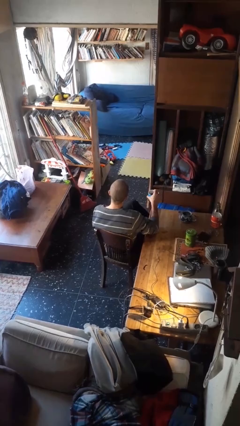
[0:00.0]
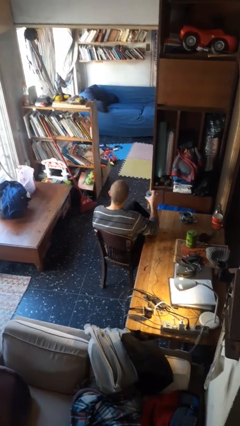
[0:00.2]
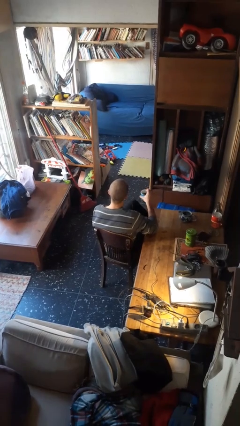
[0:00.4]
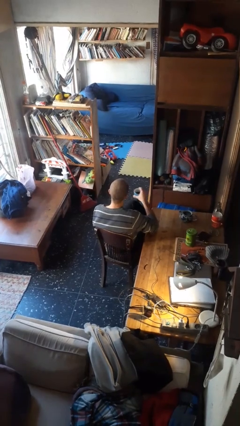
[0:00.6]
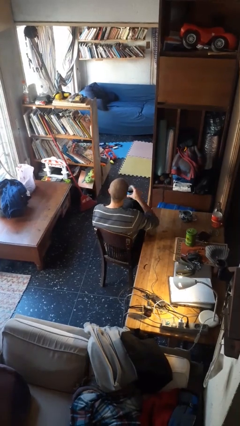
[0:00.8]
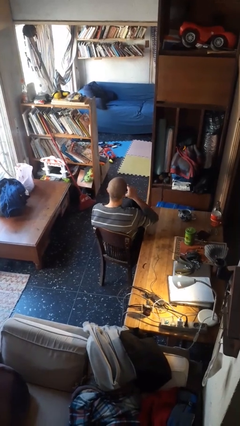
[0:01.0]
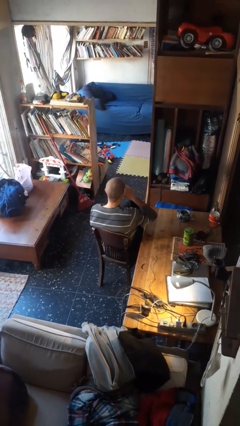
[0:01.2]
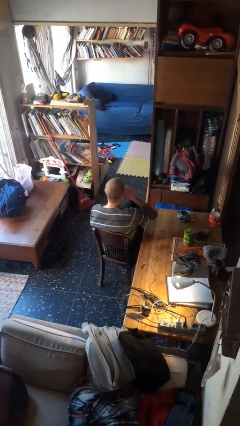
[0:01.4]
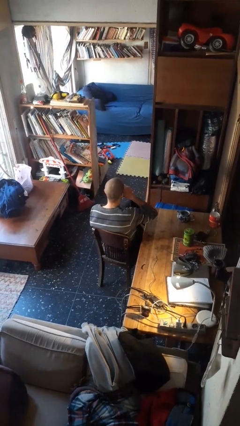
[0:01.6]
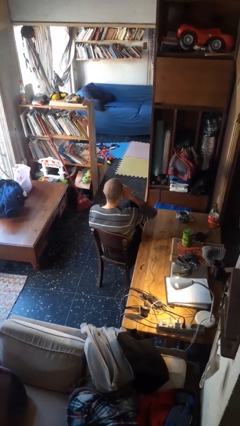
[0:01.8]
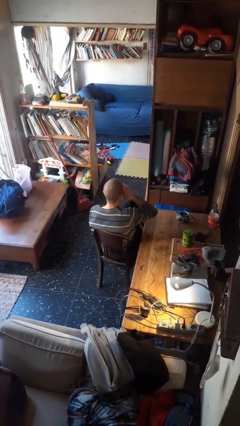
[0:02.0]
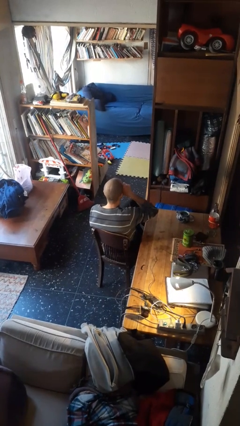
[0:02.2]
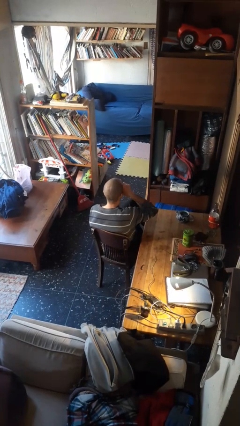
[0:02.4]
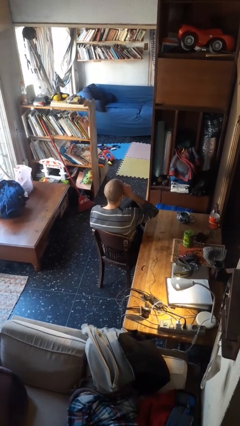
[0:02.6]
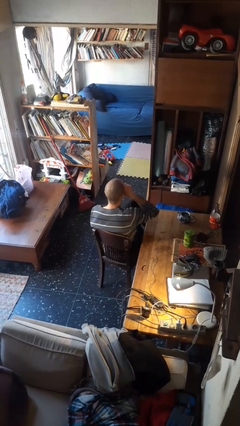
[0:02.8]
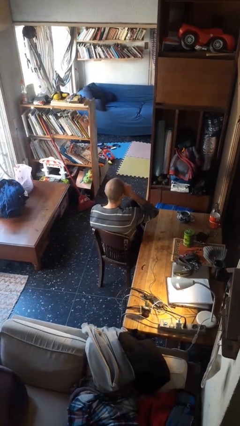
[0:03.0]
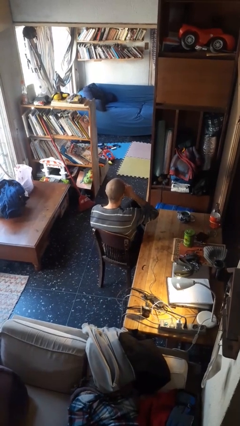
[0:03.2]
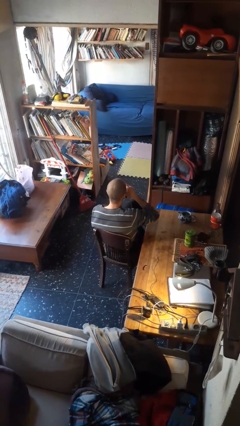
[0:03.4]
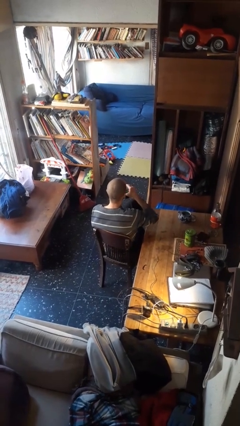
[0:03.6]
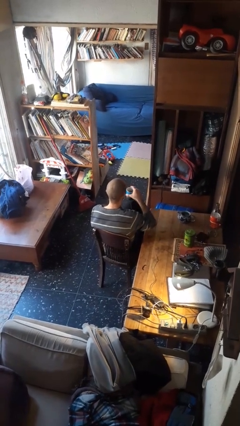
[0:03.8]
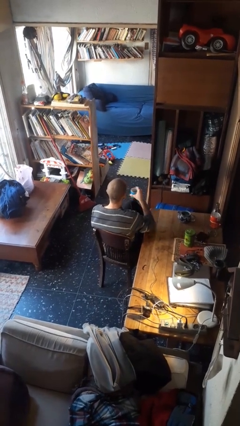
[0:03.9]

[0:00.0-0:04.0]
person drinks from mug

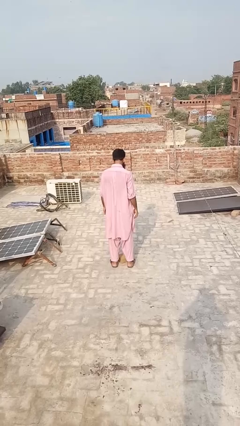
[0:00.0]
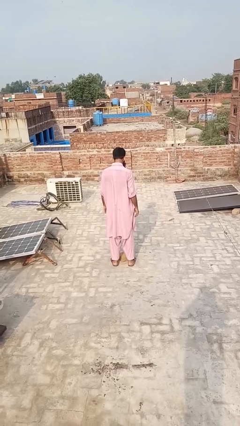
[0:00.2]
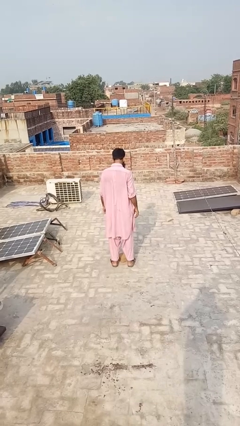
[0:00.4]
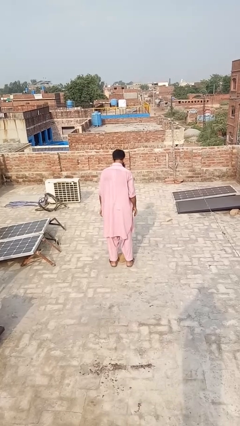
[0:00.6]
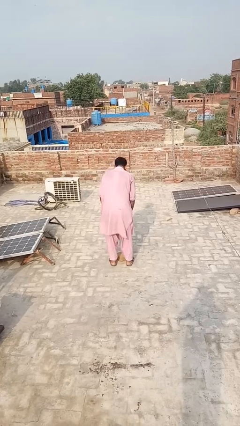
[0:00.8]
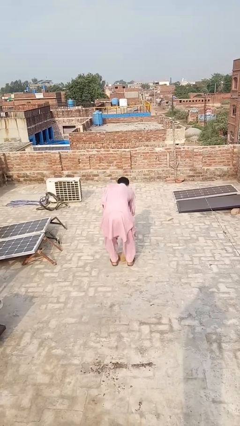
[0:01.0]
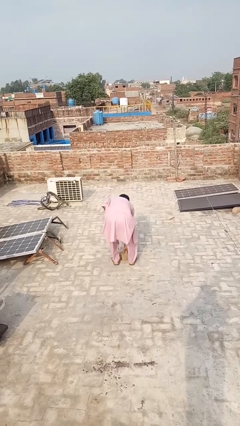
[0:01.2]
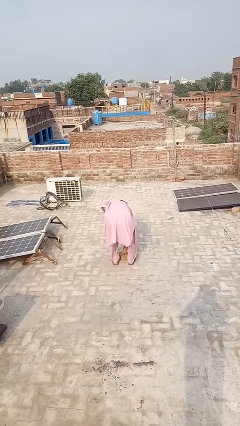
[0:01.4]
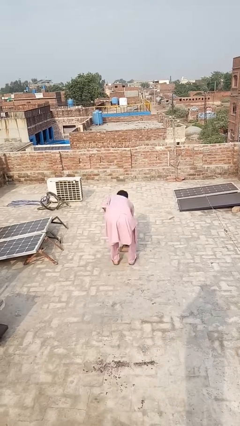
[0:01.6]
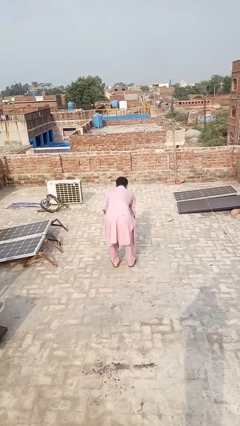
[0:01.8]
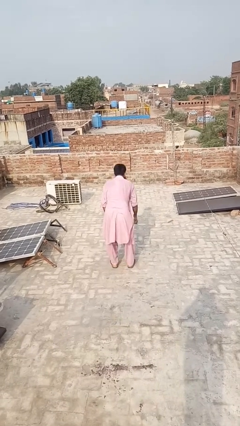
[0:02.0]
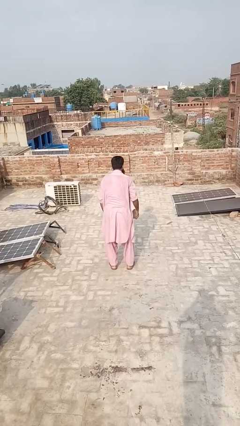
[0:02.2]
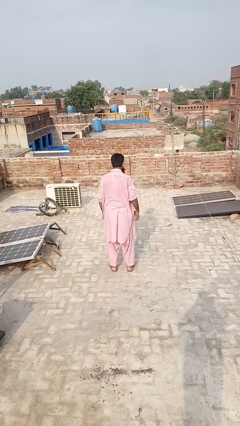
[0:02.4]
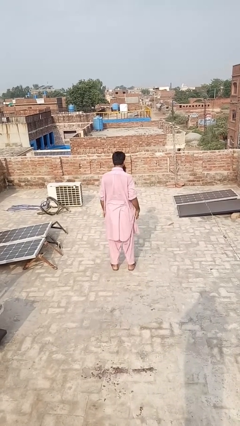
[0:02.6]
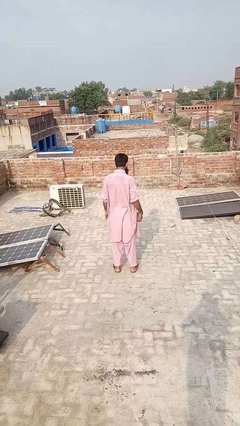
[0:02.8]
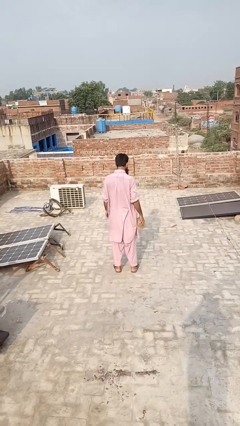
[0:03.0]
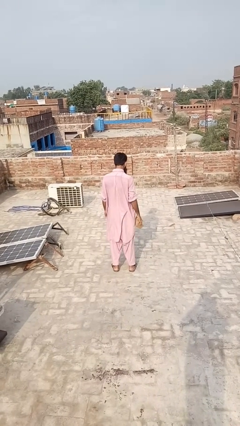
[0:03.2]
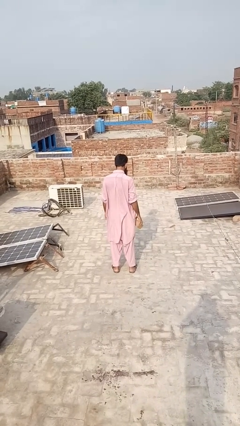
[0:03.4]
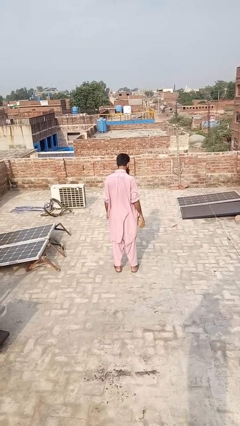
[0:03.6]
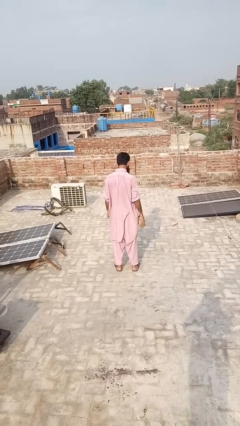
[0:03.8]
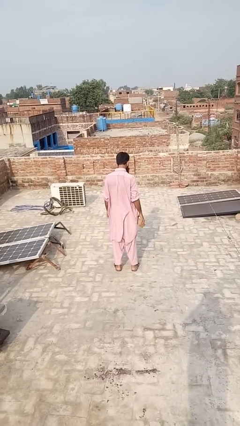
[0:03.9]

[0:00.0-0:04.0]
person picks up object from floor

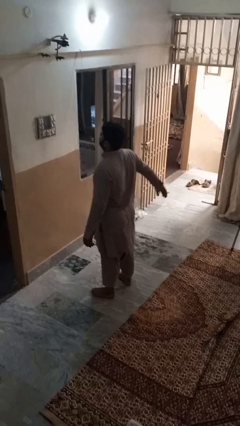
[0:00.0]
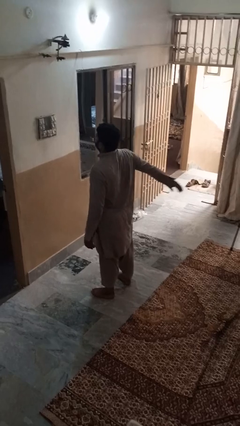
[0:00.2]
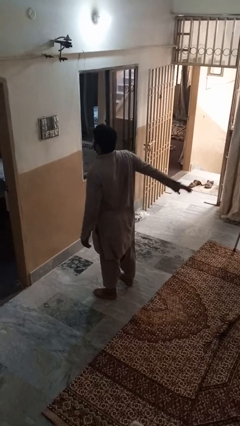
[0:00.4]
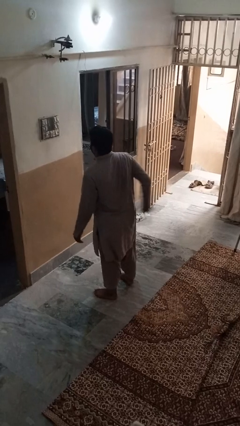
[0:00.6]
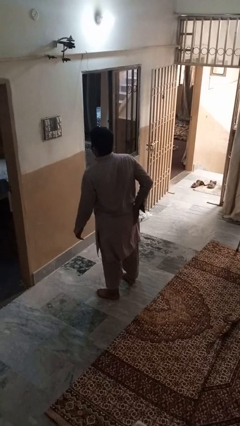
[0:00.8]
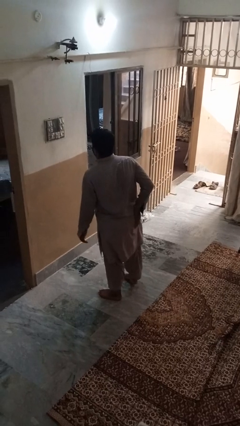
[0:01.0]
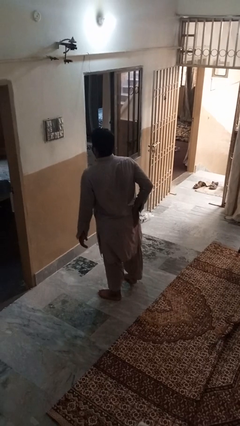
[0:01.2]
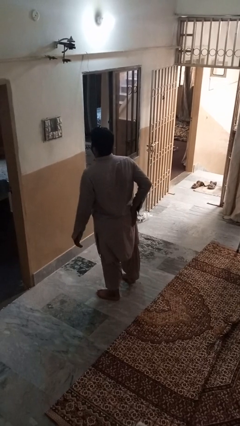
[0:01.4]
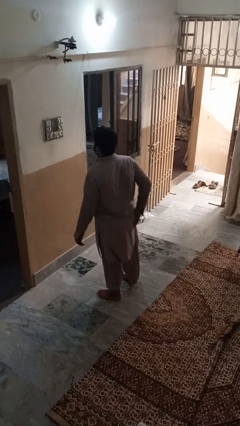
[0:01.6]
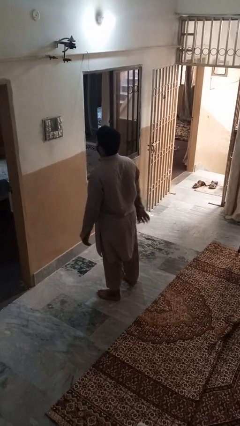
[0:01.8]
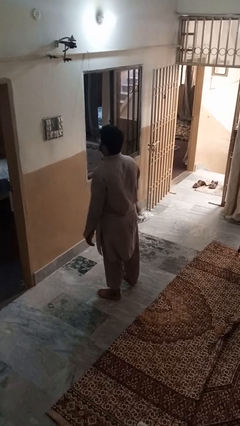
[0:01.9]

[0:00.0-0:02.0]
person wiggles hips

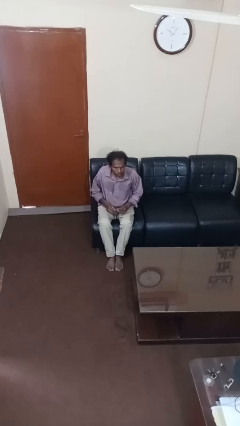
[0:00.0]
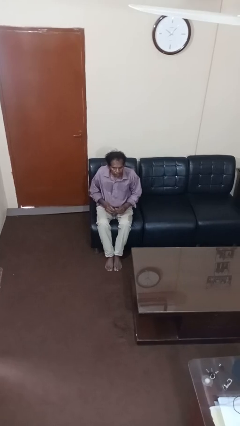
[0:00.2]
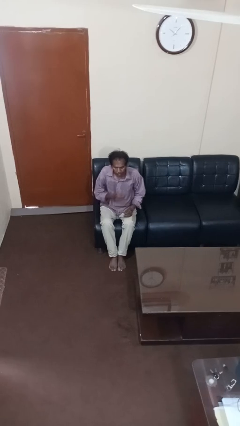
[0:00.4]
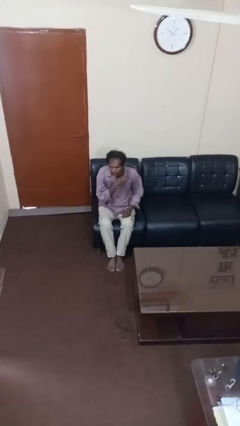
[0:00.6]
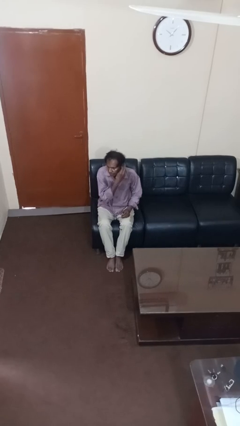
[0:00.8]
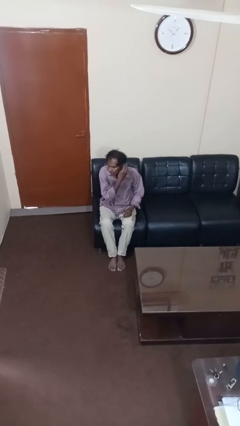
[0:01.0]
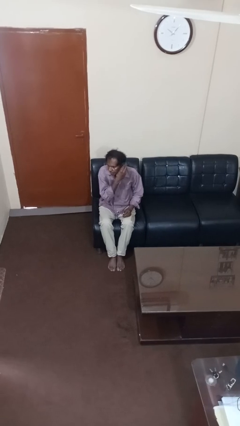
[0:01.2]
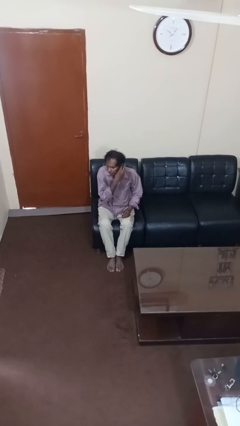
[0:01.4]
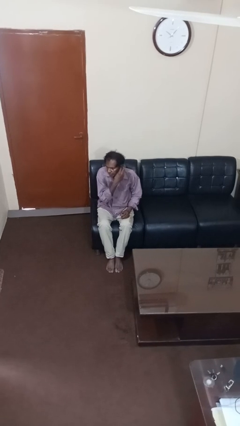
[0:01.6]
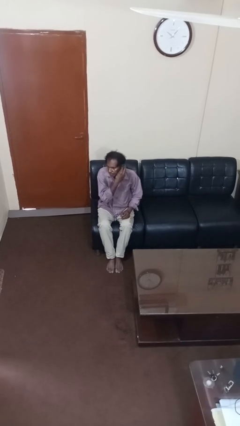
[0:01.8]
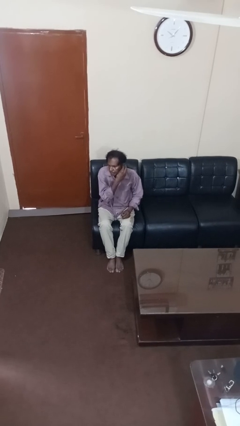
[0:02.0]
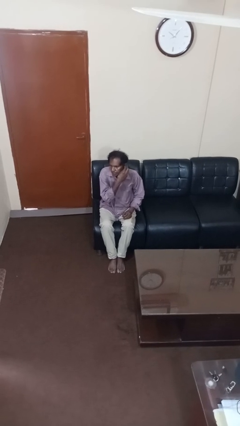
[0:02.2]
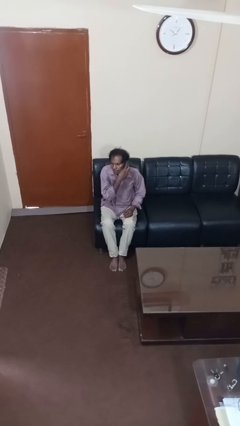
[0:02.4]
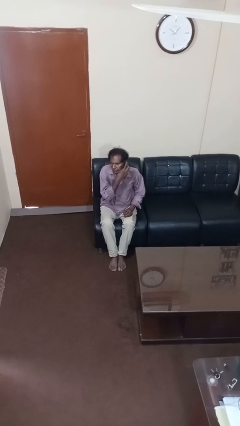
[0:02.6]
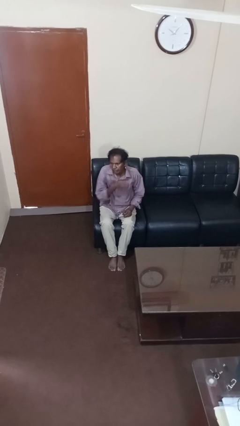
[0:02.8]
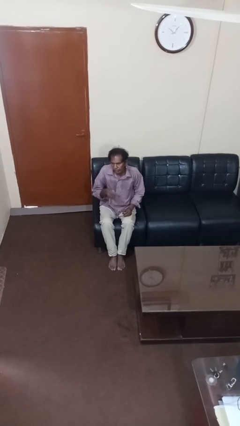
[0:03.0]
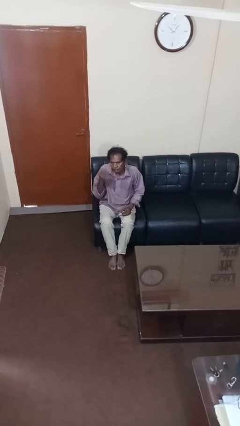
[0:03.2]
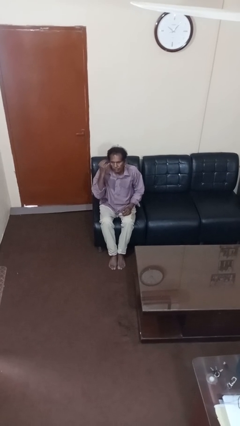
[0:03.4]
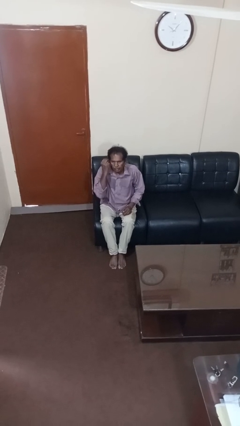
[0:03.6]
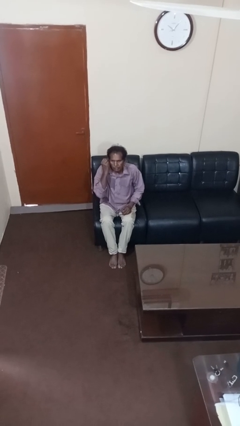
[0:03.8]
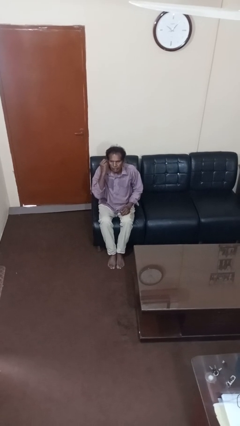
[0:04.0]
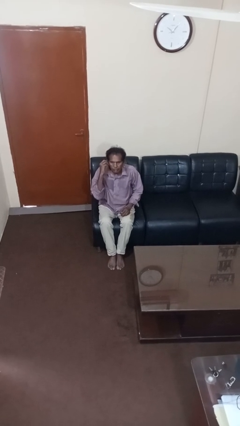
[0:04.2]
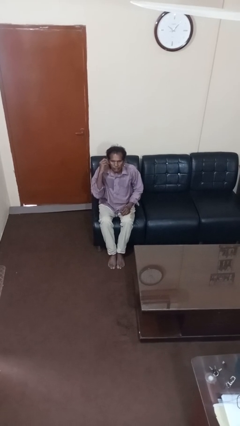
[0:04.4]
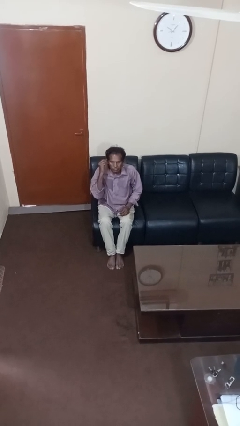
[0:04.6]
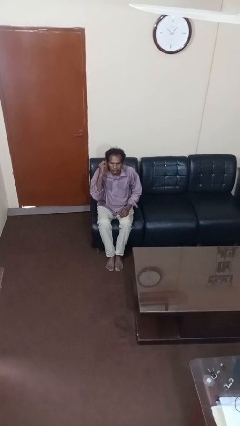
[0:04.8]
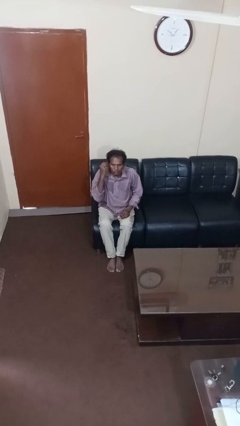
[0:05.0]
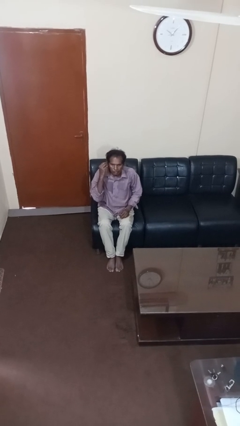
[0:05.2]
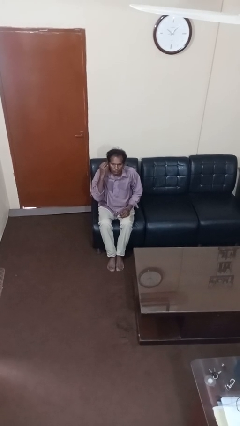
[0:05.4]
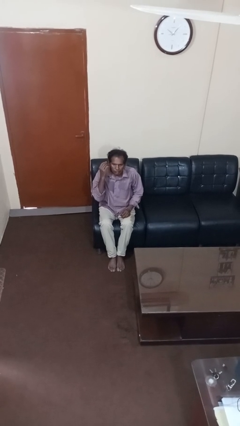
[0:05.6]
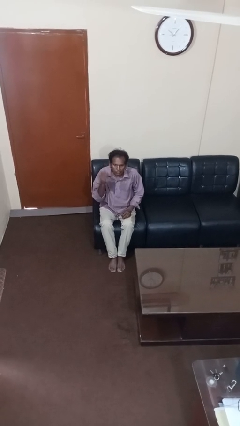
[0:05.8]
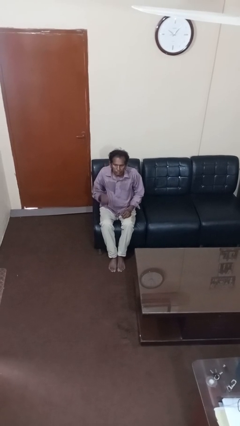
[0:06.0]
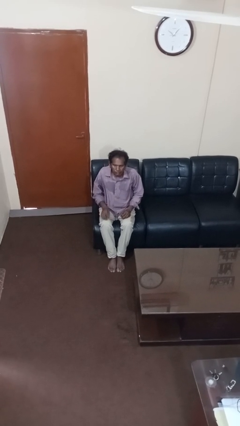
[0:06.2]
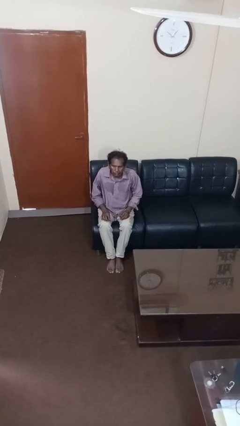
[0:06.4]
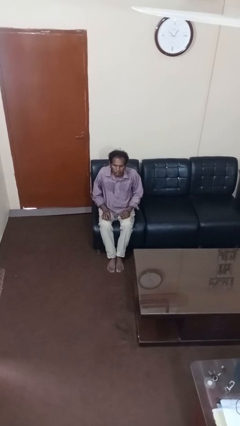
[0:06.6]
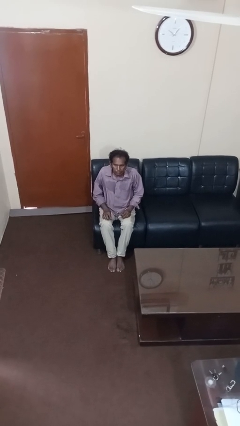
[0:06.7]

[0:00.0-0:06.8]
person puts on earrings

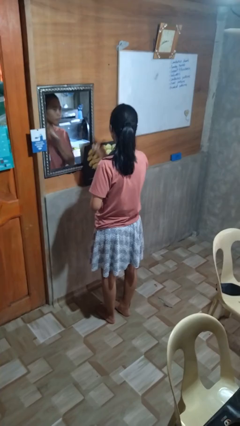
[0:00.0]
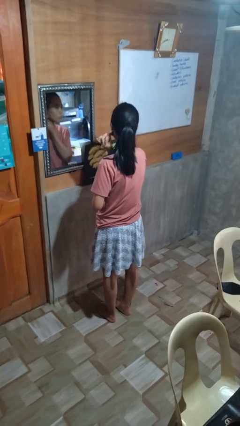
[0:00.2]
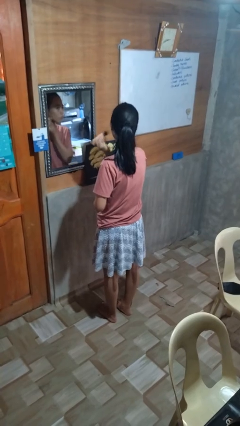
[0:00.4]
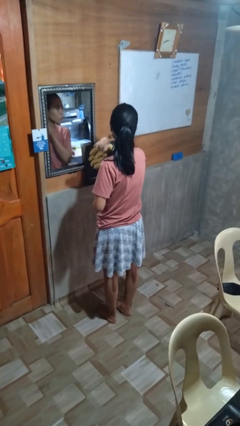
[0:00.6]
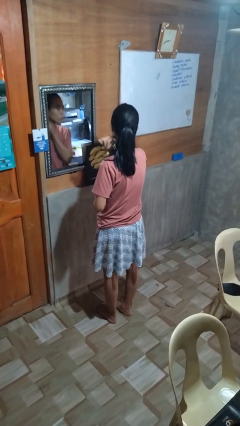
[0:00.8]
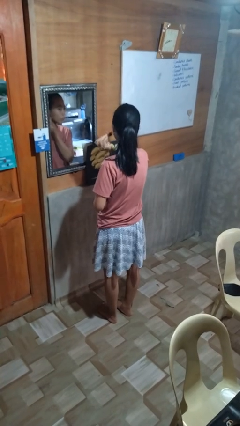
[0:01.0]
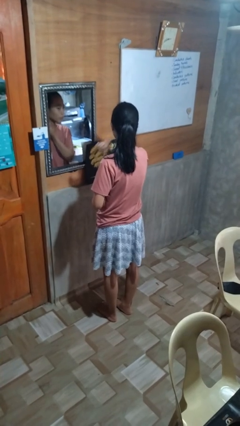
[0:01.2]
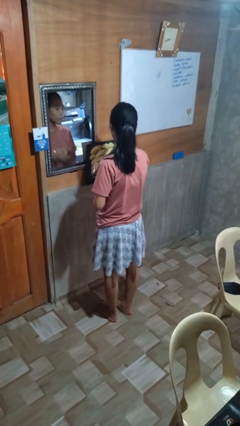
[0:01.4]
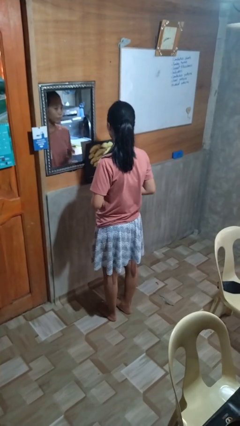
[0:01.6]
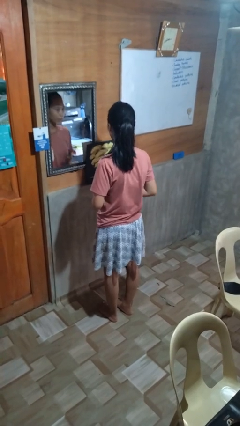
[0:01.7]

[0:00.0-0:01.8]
person applies foundation makeup
